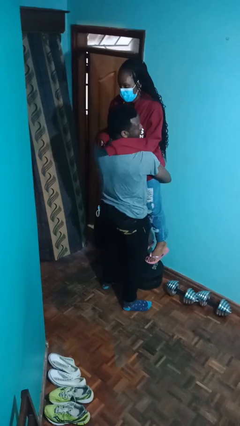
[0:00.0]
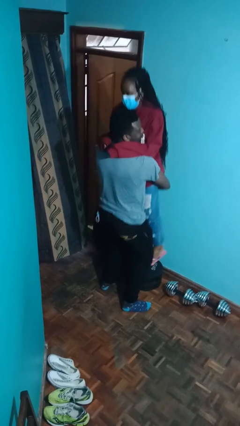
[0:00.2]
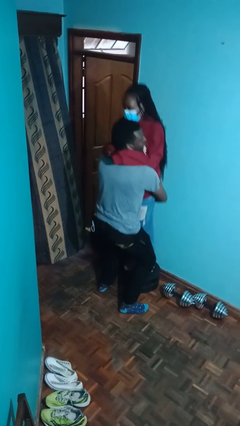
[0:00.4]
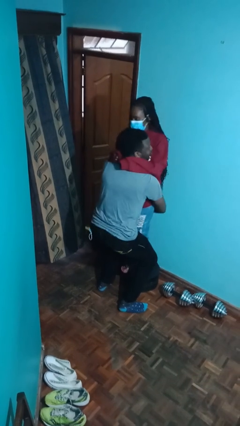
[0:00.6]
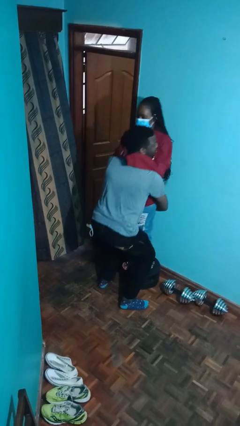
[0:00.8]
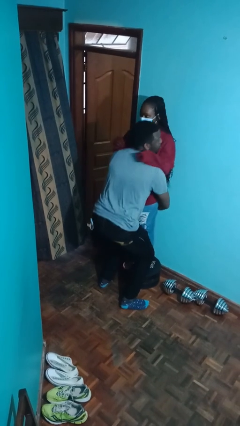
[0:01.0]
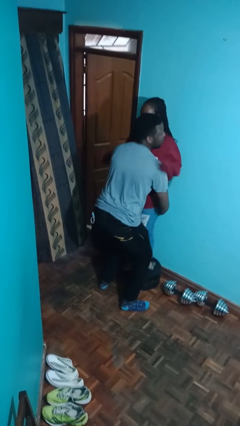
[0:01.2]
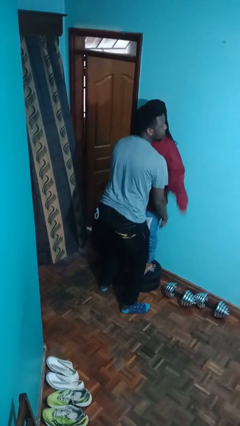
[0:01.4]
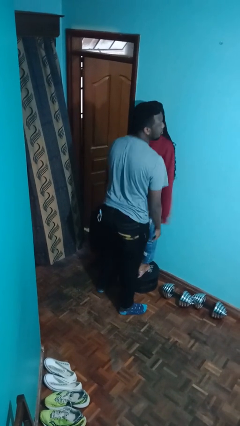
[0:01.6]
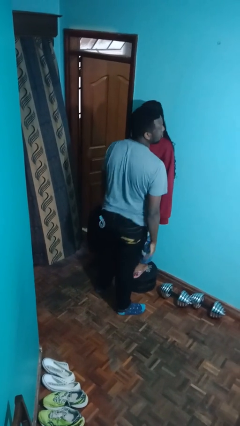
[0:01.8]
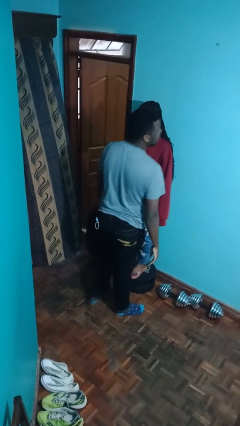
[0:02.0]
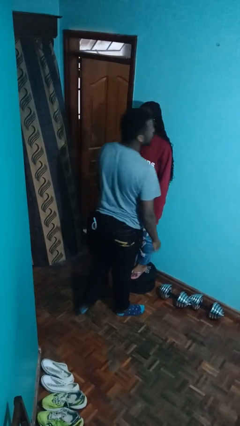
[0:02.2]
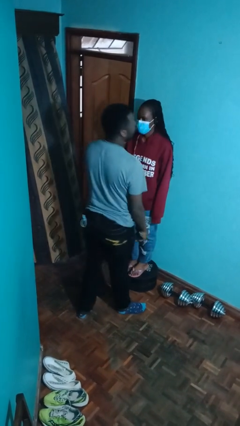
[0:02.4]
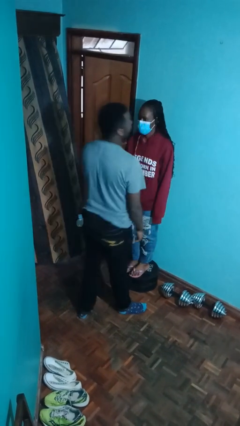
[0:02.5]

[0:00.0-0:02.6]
person puts down person

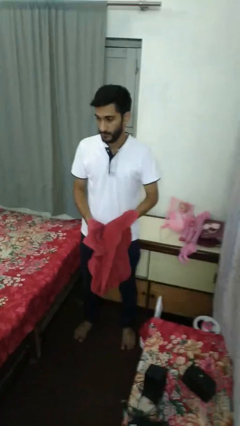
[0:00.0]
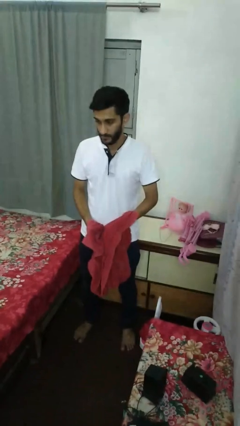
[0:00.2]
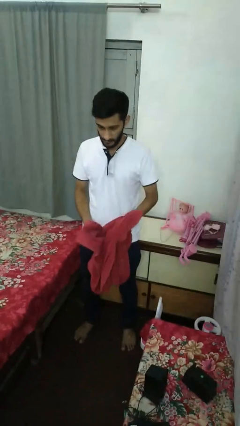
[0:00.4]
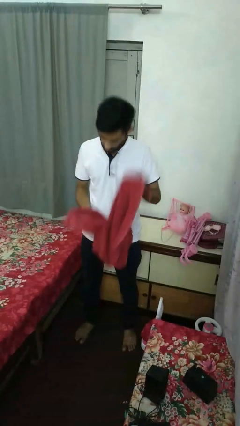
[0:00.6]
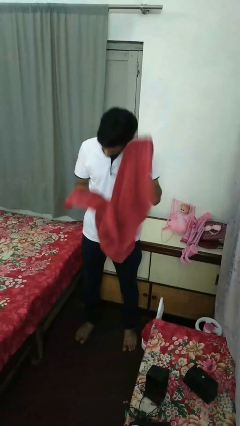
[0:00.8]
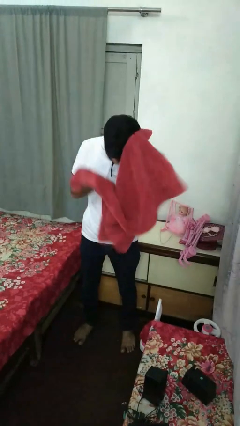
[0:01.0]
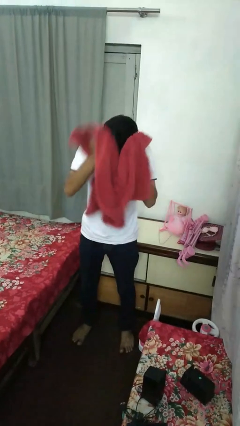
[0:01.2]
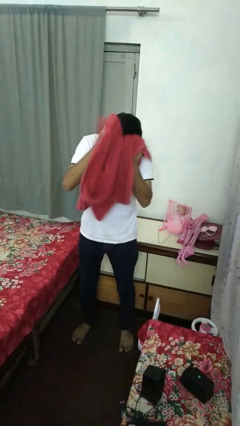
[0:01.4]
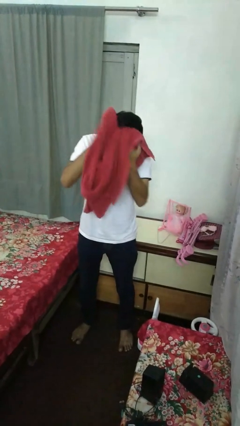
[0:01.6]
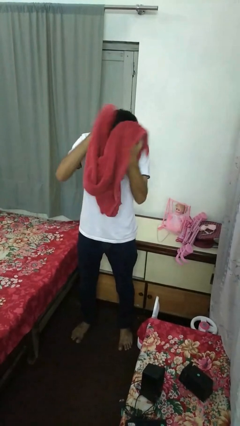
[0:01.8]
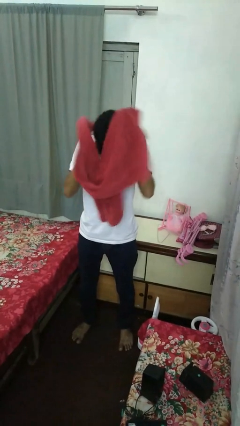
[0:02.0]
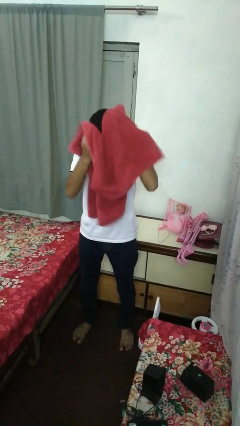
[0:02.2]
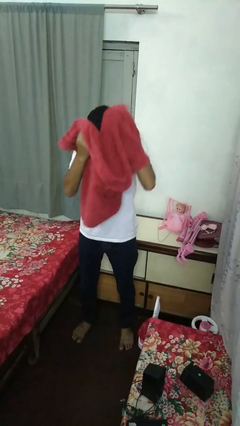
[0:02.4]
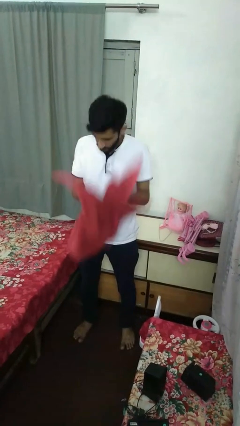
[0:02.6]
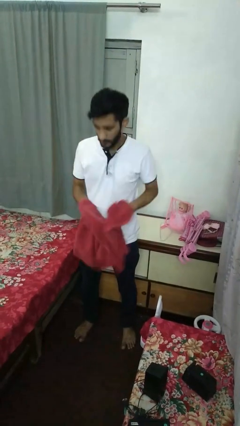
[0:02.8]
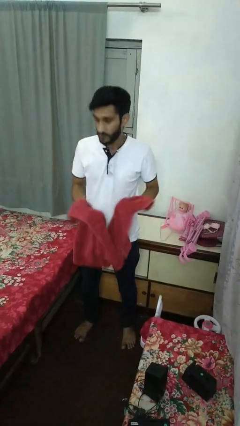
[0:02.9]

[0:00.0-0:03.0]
person dries hair with towel

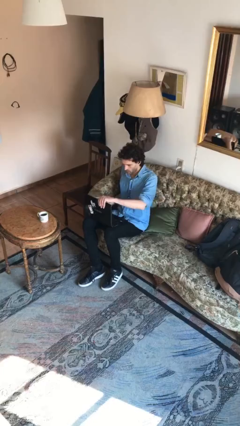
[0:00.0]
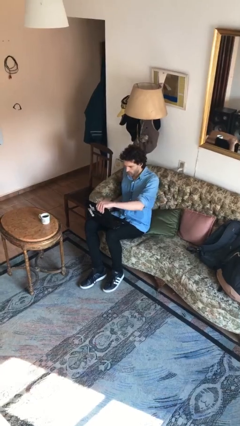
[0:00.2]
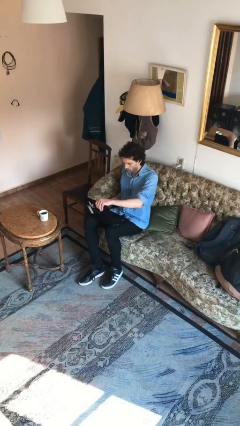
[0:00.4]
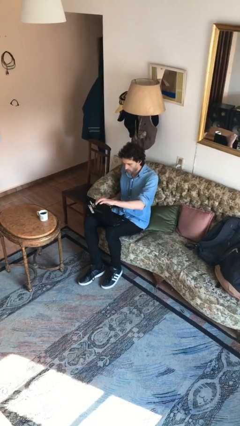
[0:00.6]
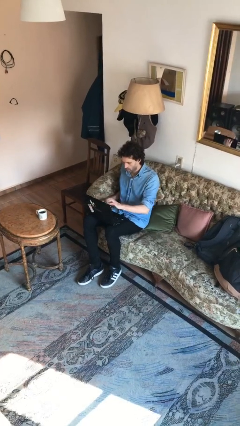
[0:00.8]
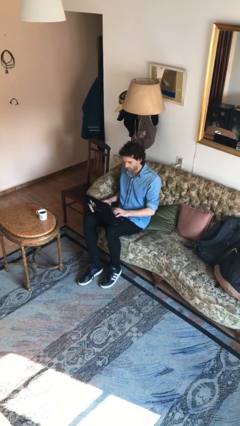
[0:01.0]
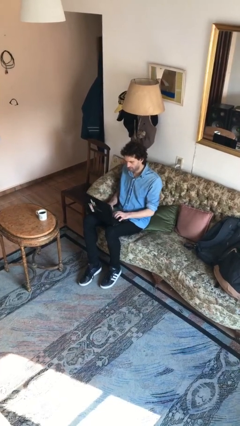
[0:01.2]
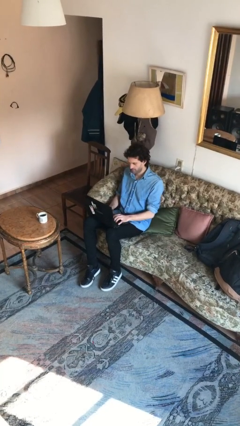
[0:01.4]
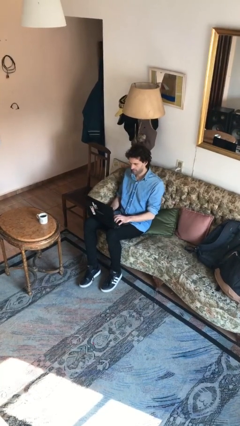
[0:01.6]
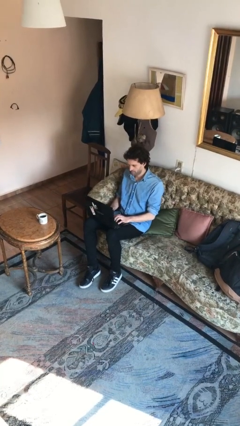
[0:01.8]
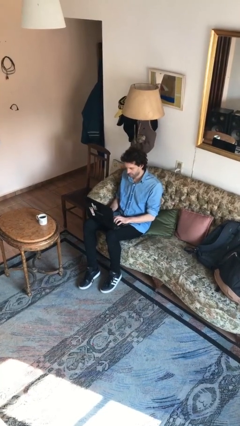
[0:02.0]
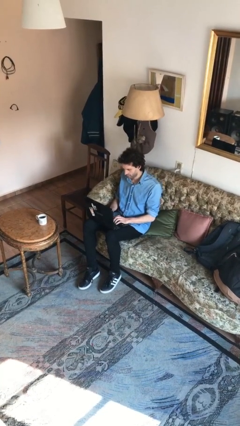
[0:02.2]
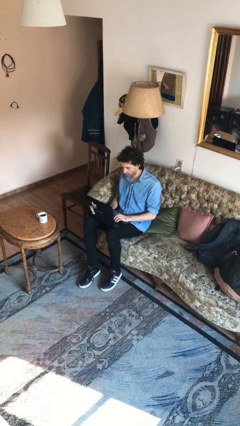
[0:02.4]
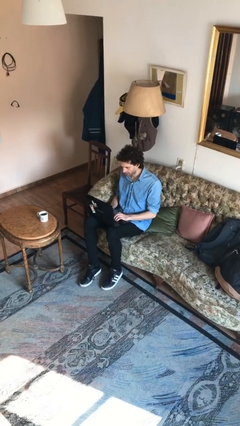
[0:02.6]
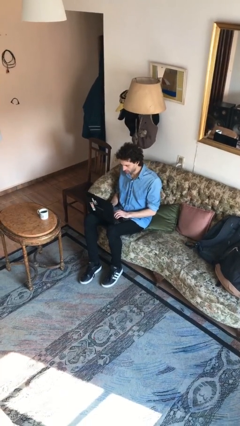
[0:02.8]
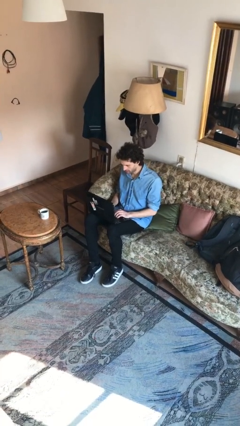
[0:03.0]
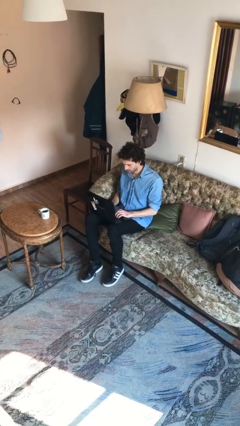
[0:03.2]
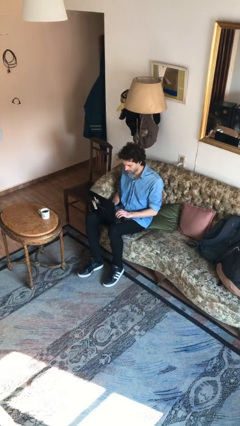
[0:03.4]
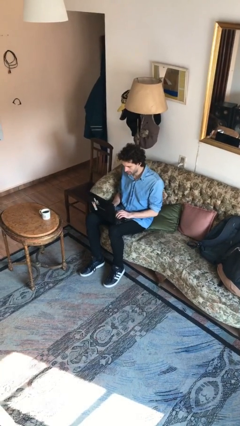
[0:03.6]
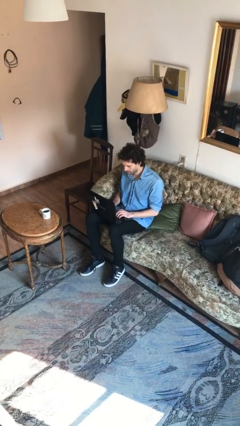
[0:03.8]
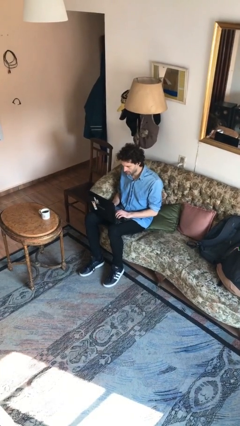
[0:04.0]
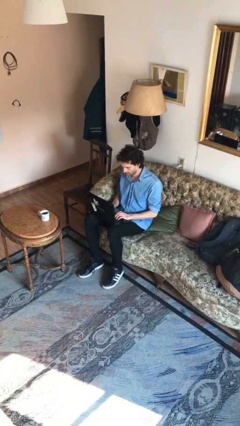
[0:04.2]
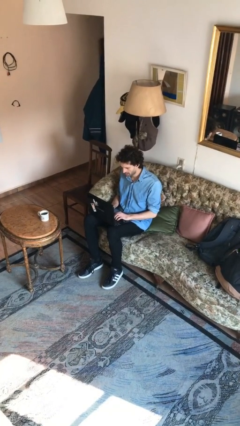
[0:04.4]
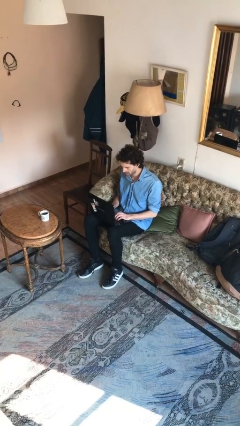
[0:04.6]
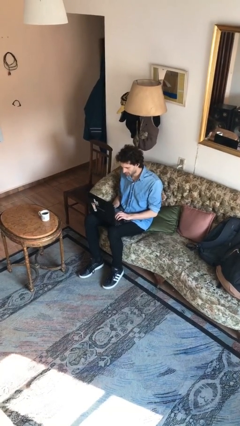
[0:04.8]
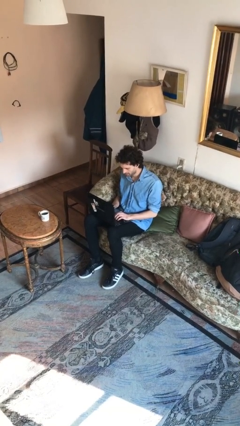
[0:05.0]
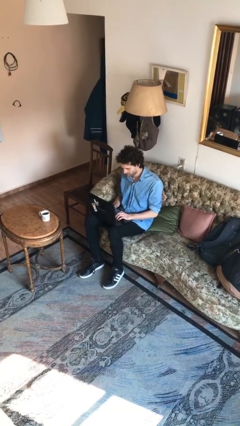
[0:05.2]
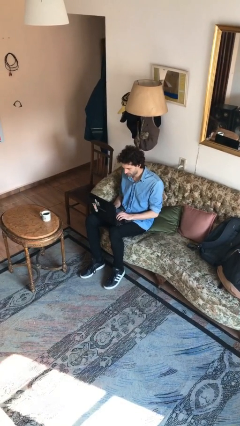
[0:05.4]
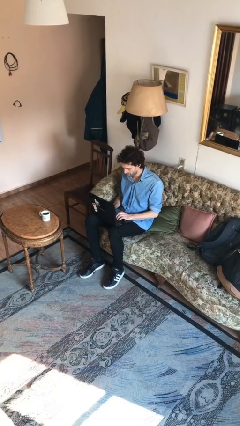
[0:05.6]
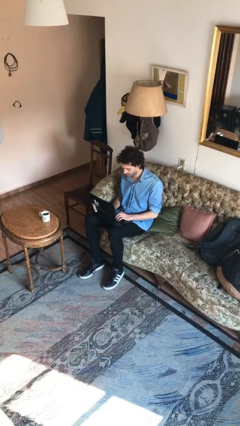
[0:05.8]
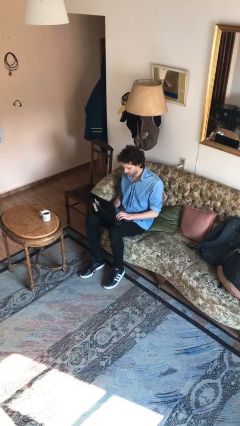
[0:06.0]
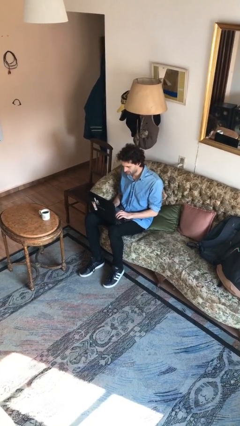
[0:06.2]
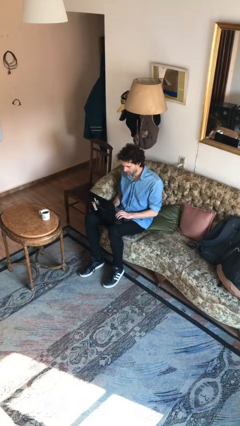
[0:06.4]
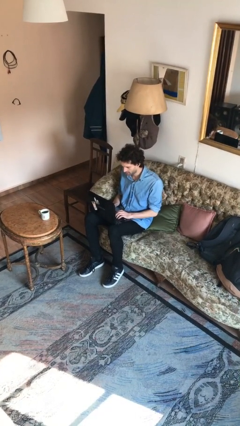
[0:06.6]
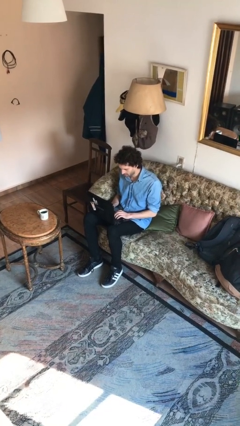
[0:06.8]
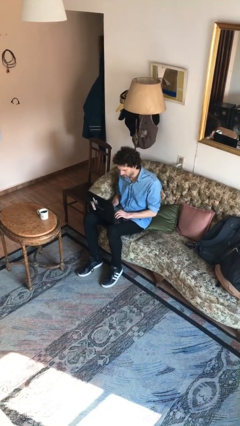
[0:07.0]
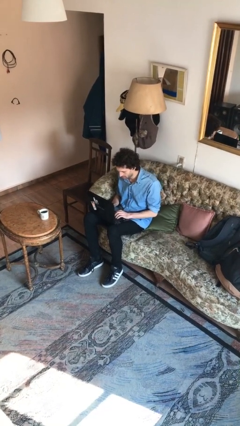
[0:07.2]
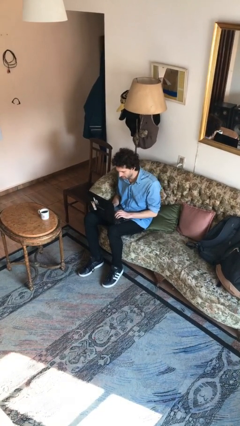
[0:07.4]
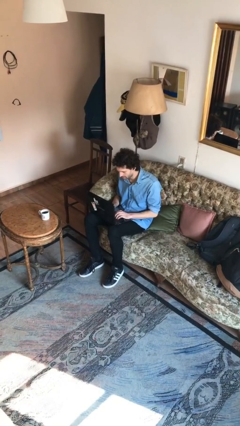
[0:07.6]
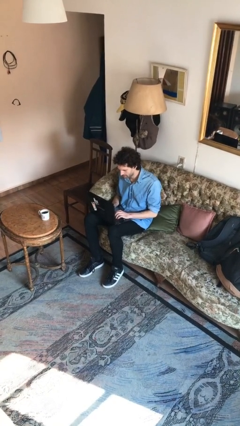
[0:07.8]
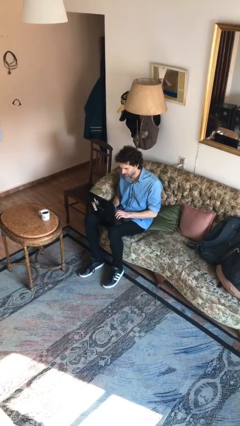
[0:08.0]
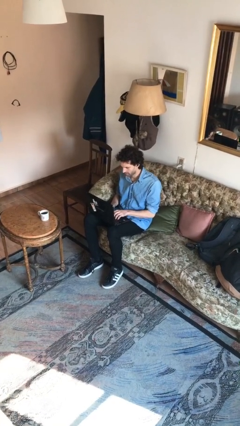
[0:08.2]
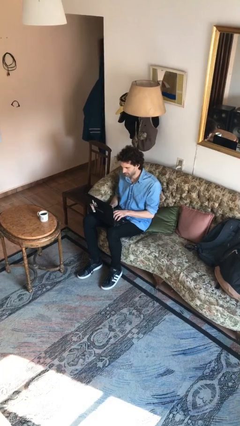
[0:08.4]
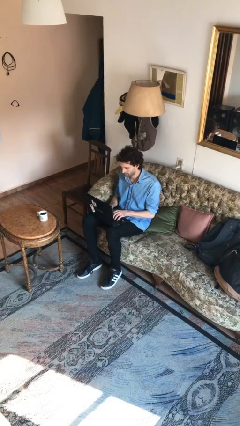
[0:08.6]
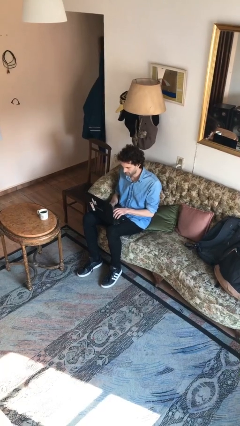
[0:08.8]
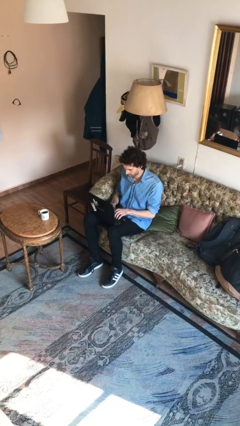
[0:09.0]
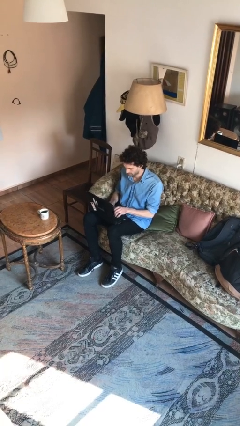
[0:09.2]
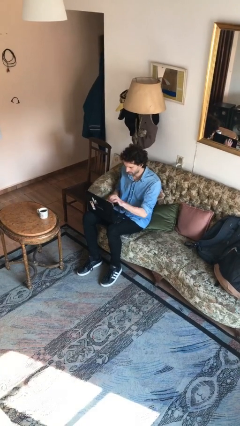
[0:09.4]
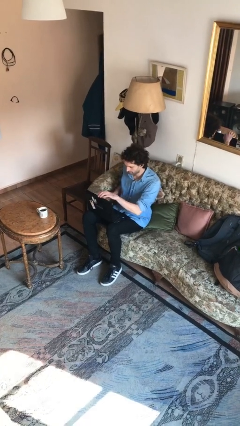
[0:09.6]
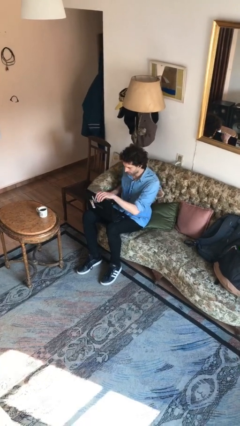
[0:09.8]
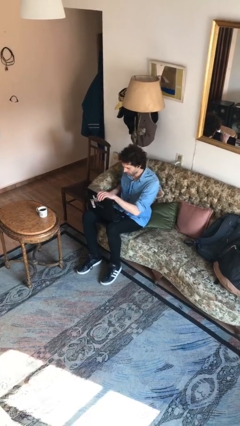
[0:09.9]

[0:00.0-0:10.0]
person interacts with laptop

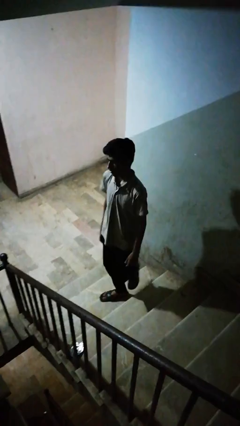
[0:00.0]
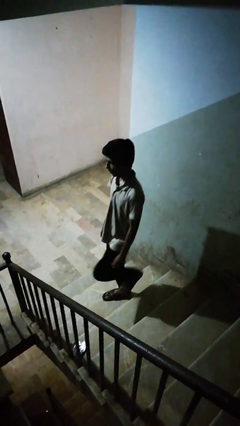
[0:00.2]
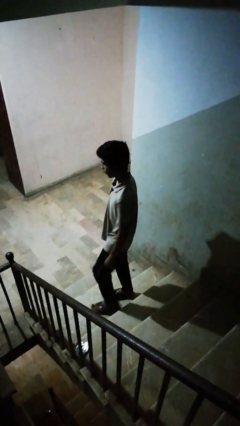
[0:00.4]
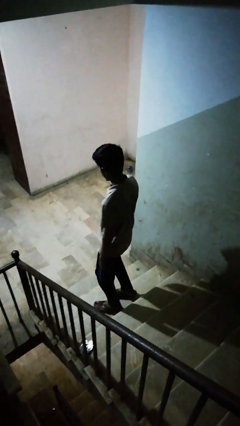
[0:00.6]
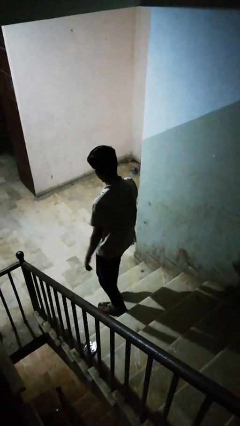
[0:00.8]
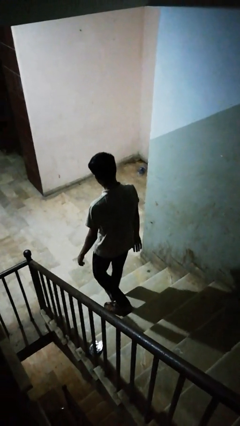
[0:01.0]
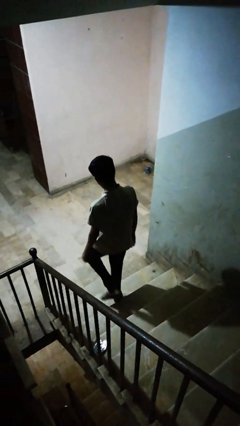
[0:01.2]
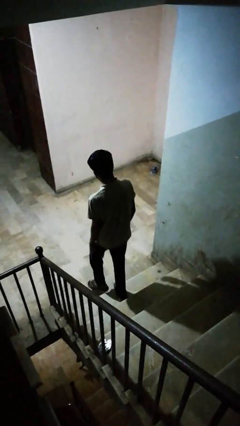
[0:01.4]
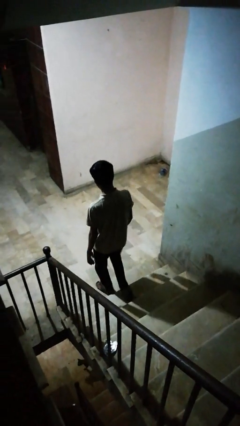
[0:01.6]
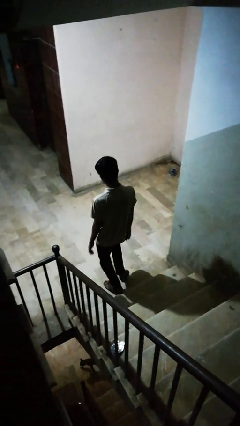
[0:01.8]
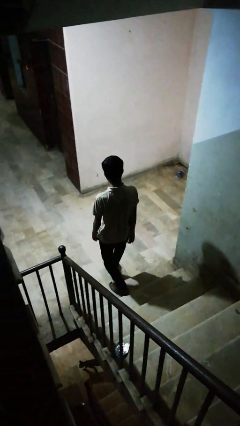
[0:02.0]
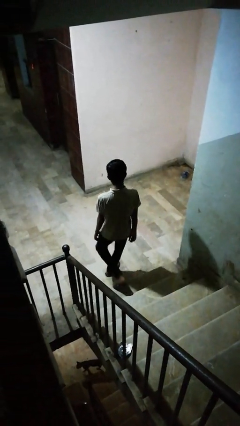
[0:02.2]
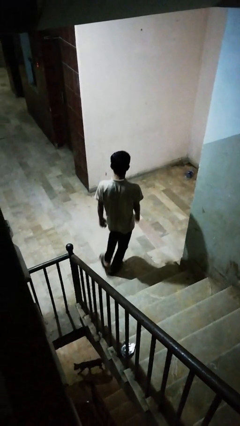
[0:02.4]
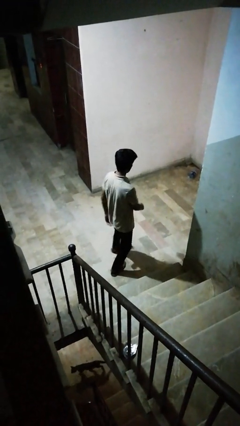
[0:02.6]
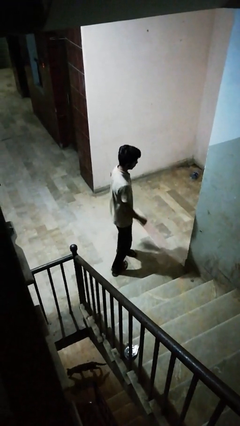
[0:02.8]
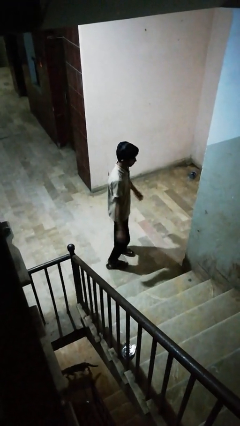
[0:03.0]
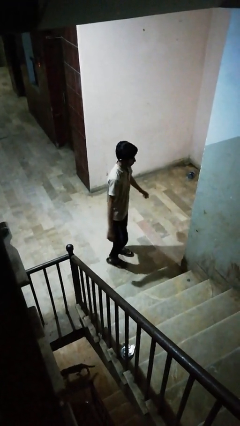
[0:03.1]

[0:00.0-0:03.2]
person climbs down stairs
